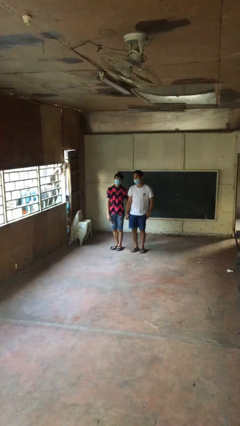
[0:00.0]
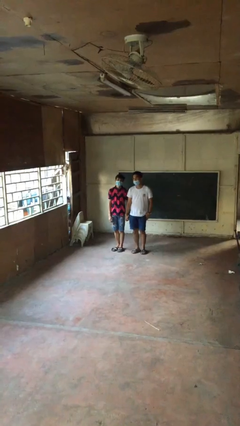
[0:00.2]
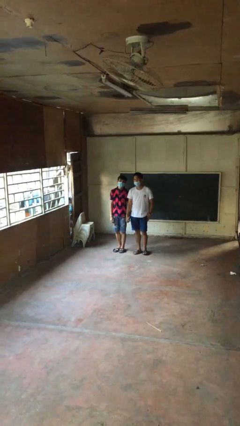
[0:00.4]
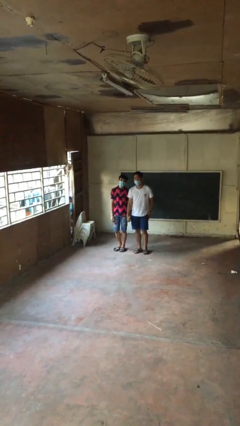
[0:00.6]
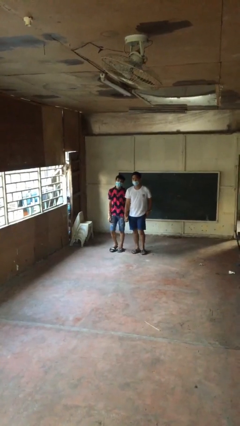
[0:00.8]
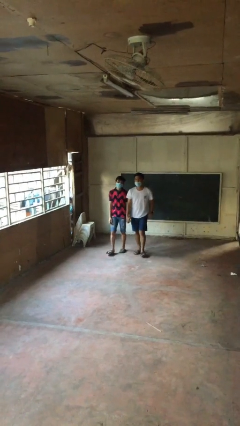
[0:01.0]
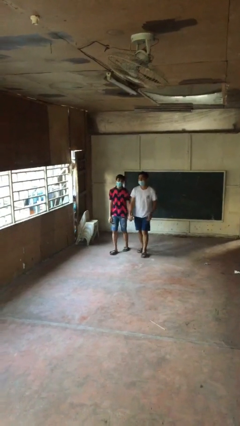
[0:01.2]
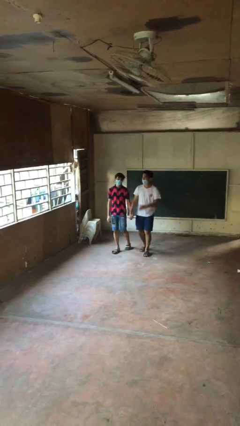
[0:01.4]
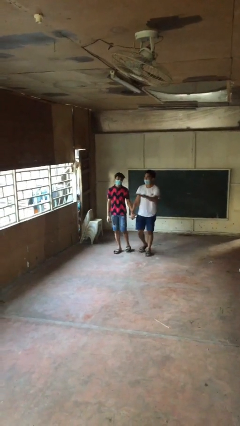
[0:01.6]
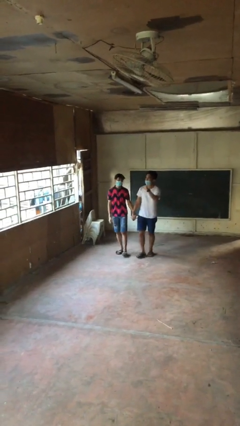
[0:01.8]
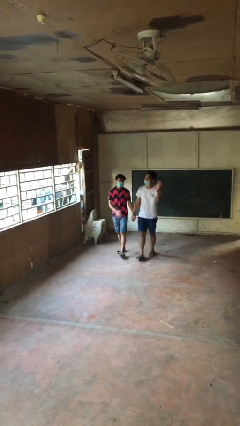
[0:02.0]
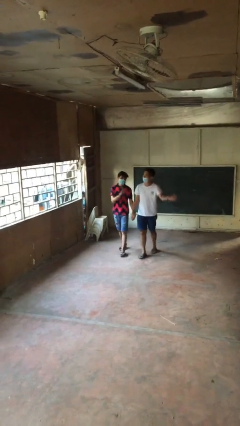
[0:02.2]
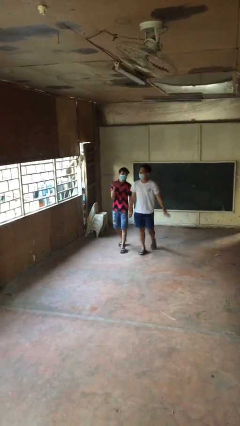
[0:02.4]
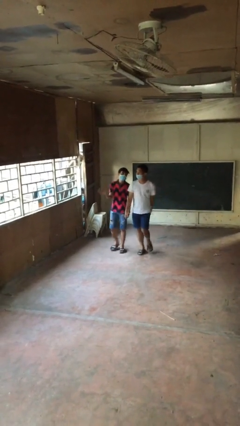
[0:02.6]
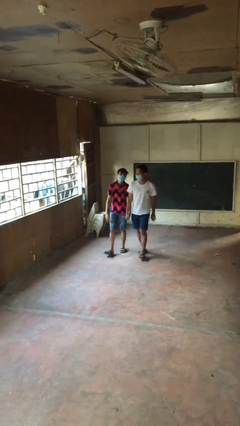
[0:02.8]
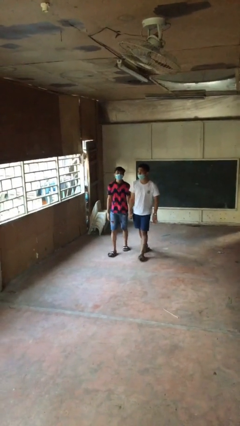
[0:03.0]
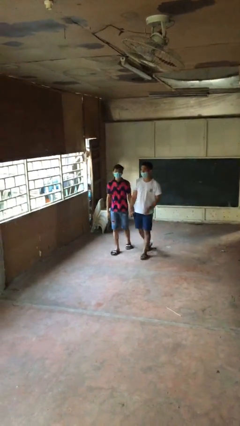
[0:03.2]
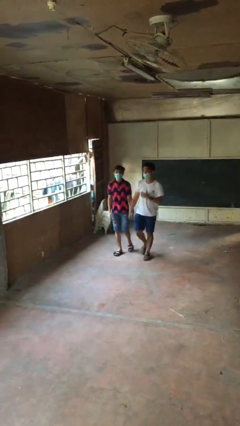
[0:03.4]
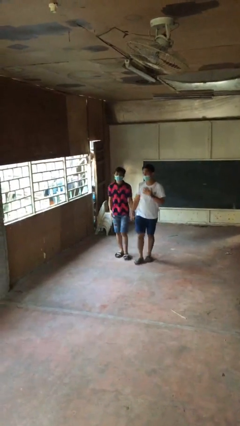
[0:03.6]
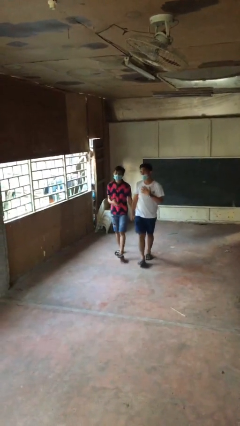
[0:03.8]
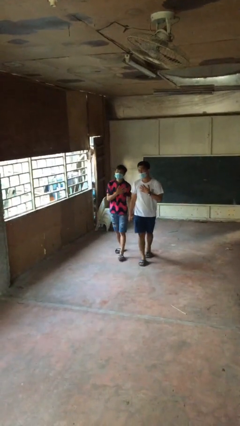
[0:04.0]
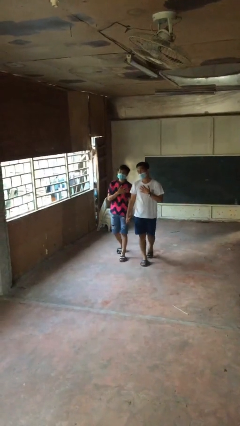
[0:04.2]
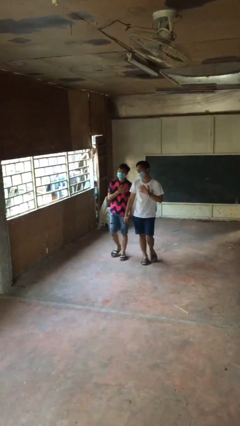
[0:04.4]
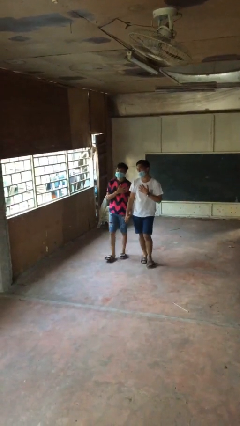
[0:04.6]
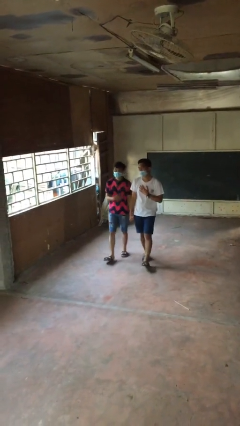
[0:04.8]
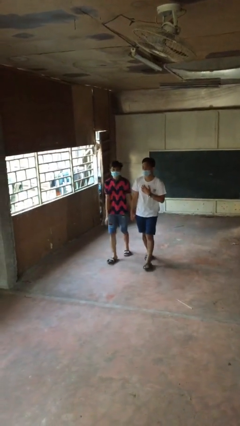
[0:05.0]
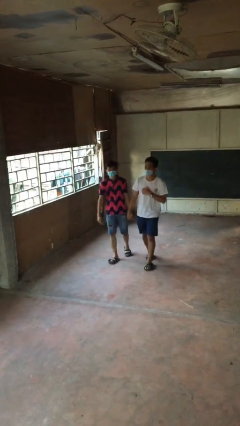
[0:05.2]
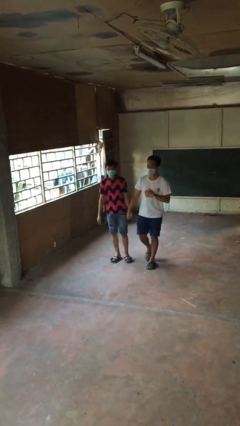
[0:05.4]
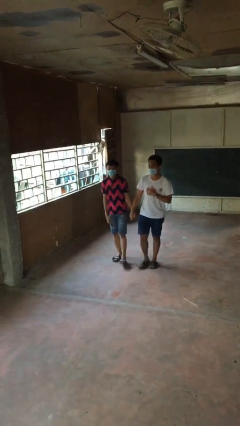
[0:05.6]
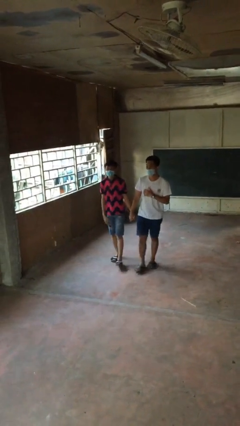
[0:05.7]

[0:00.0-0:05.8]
person holds hand

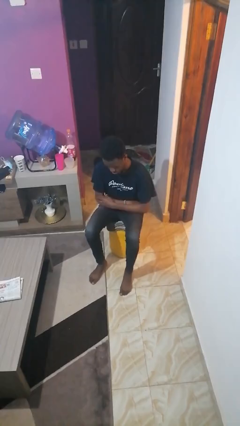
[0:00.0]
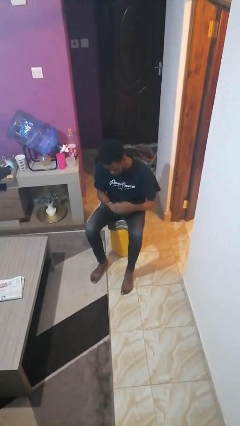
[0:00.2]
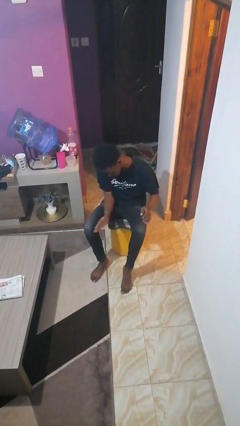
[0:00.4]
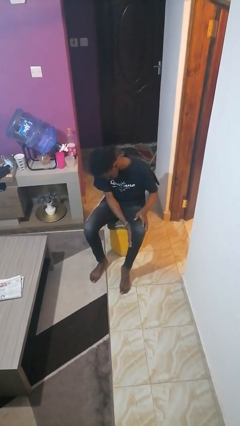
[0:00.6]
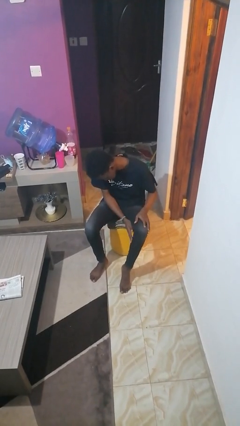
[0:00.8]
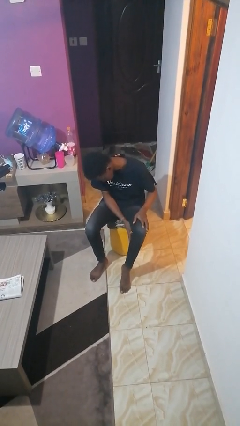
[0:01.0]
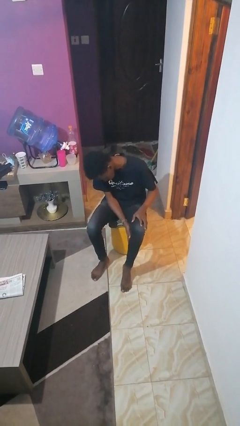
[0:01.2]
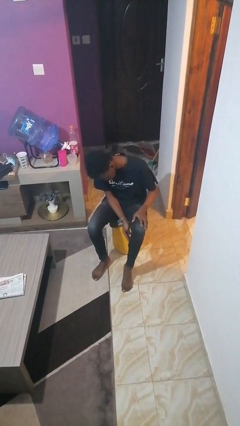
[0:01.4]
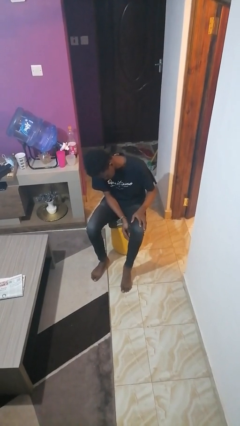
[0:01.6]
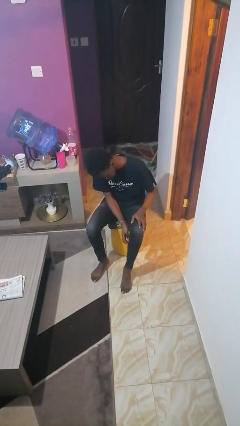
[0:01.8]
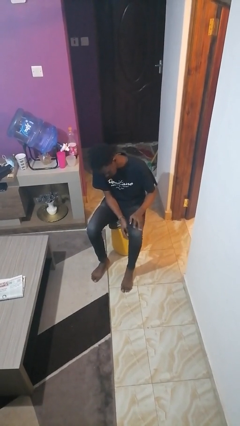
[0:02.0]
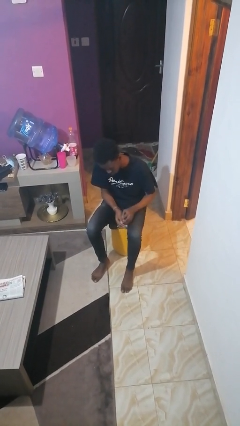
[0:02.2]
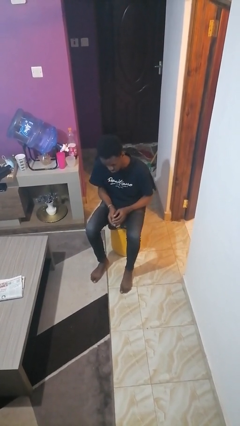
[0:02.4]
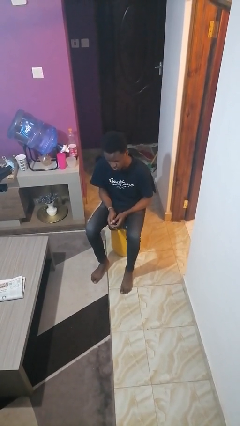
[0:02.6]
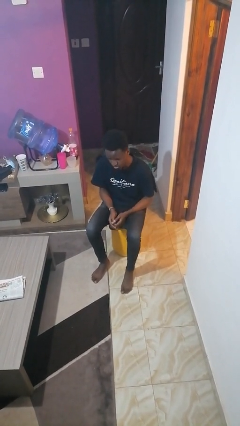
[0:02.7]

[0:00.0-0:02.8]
person swats bug

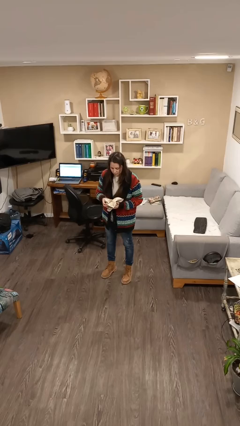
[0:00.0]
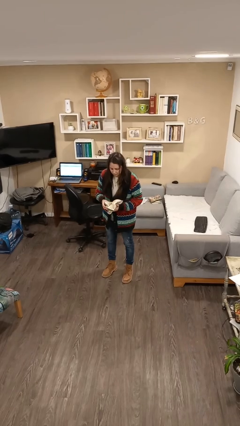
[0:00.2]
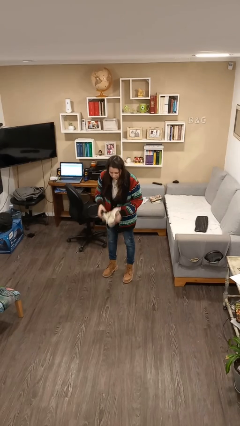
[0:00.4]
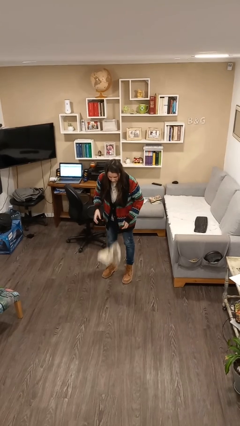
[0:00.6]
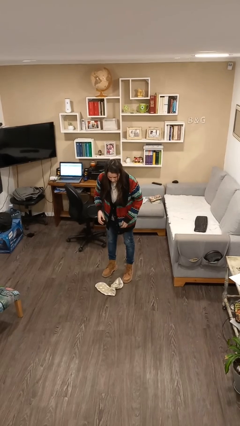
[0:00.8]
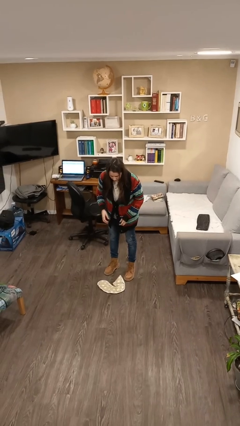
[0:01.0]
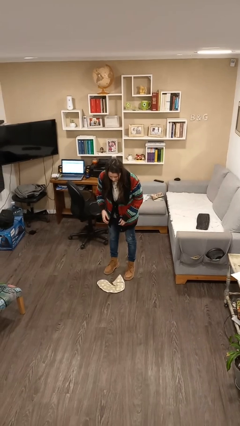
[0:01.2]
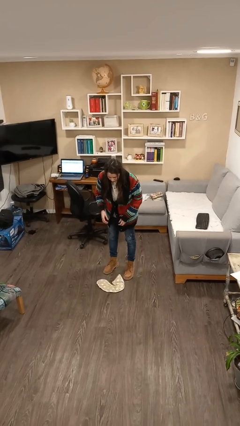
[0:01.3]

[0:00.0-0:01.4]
person drops object

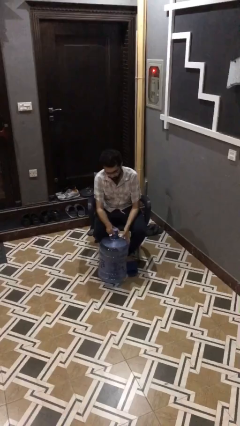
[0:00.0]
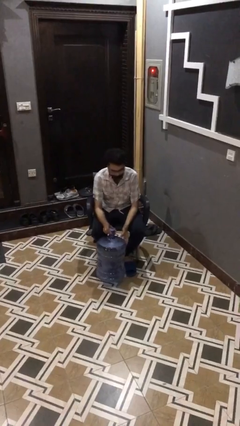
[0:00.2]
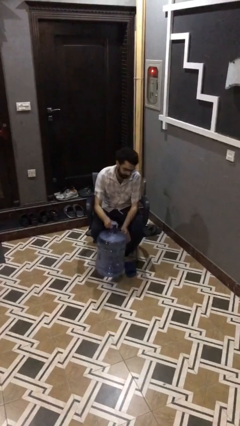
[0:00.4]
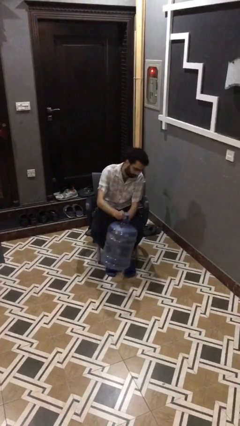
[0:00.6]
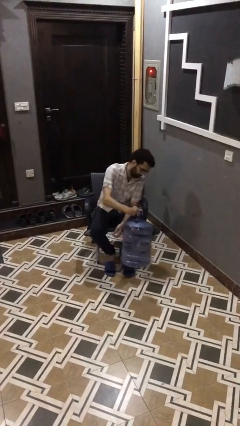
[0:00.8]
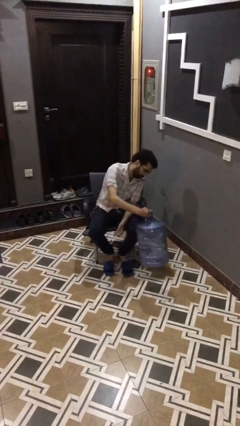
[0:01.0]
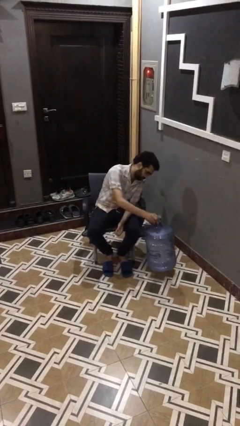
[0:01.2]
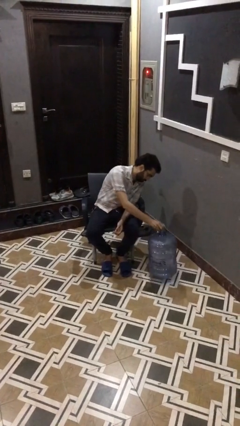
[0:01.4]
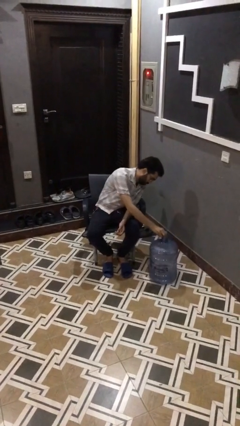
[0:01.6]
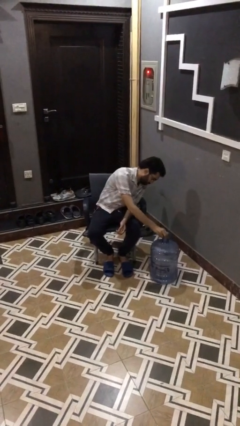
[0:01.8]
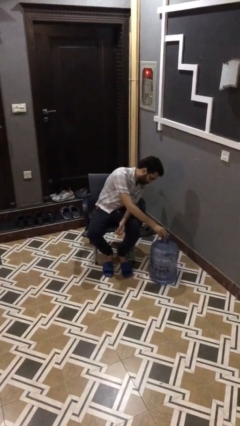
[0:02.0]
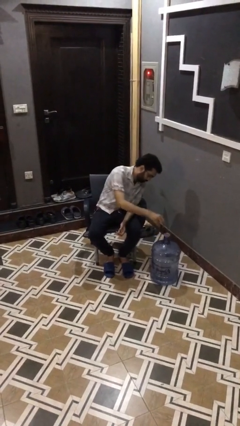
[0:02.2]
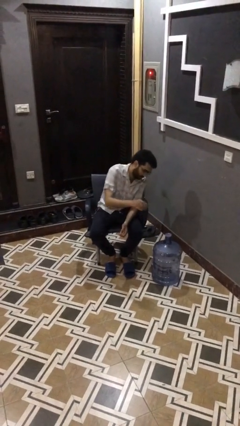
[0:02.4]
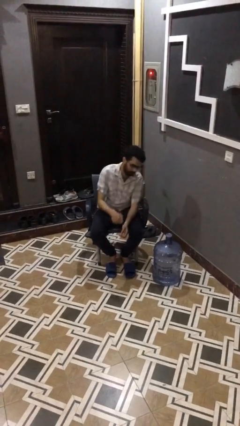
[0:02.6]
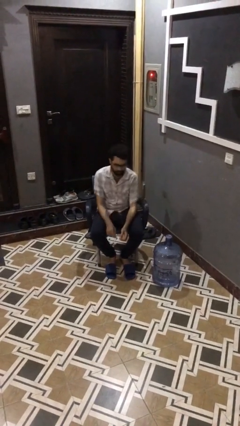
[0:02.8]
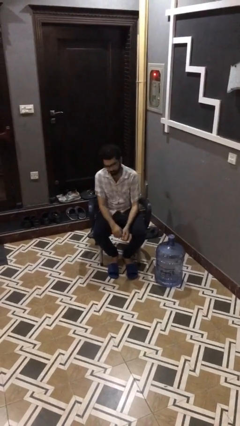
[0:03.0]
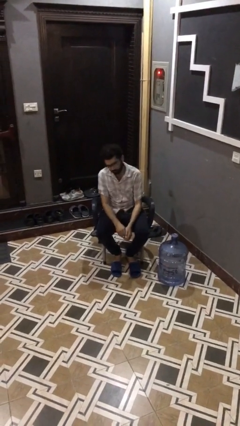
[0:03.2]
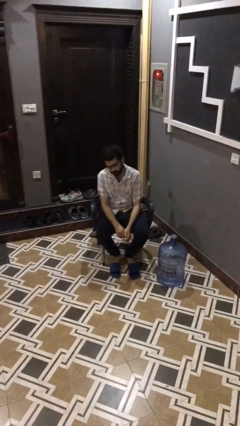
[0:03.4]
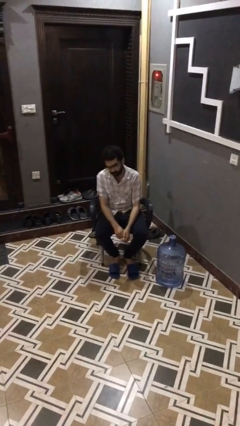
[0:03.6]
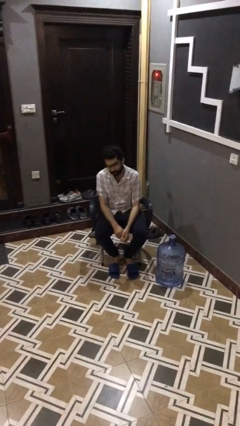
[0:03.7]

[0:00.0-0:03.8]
person puts down object on floor

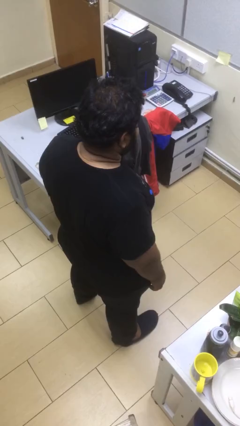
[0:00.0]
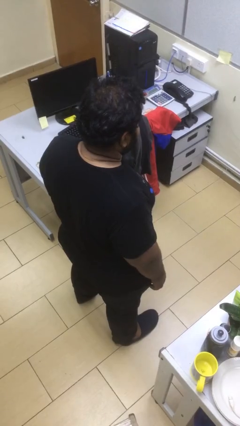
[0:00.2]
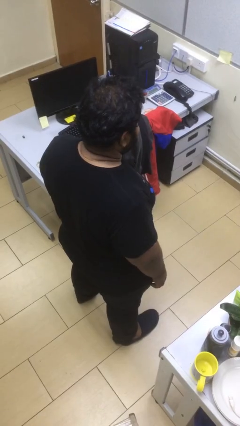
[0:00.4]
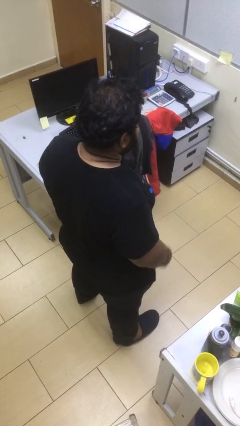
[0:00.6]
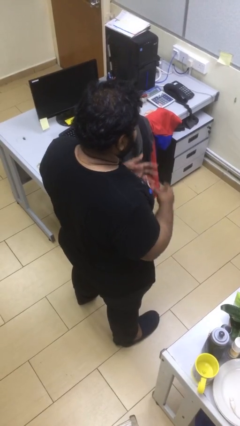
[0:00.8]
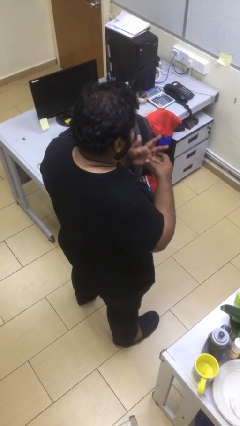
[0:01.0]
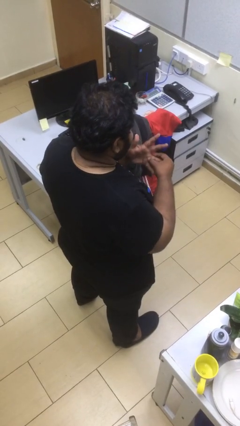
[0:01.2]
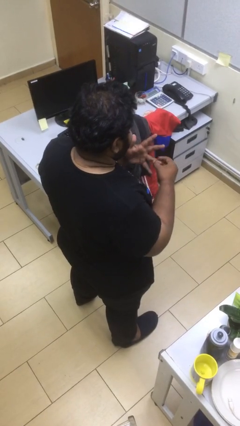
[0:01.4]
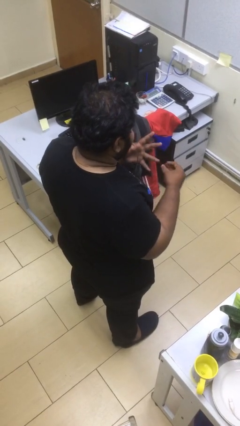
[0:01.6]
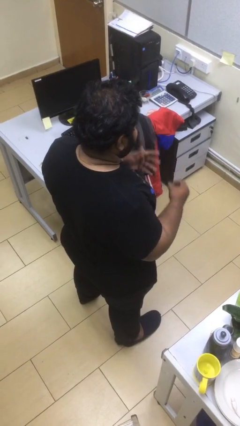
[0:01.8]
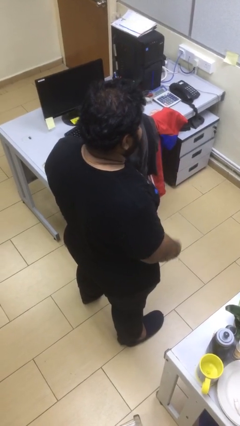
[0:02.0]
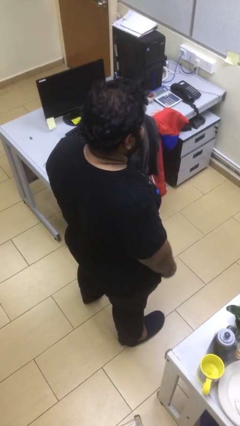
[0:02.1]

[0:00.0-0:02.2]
person takes off ring

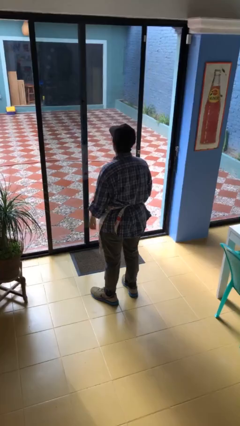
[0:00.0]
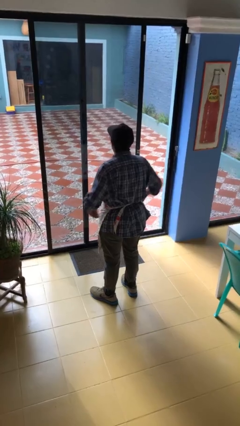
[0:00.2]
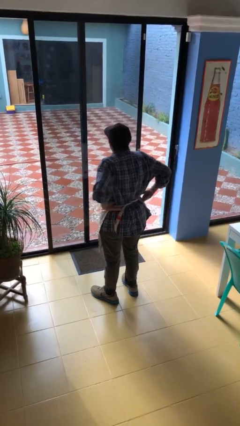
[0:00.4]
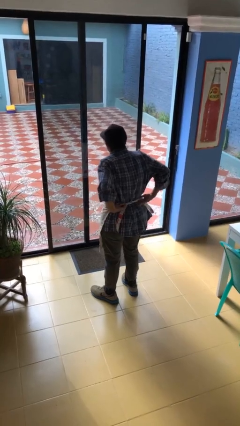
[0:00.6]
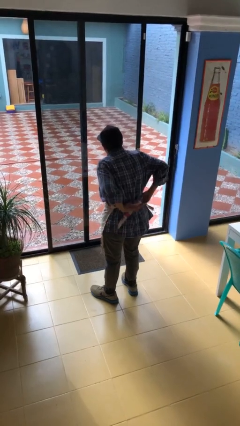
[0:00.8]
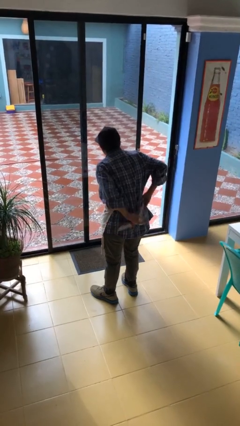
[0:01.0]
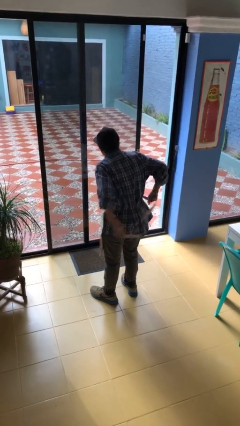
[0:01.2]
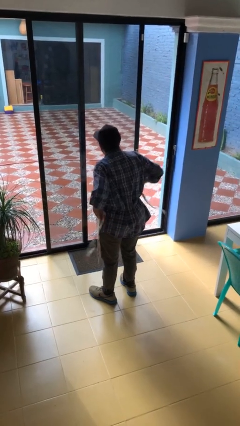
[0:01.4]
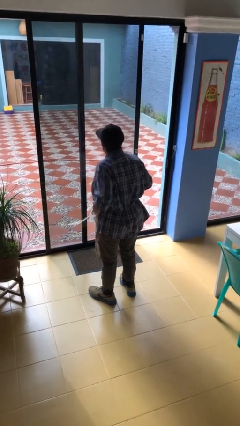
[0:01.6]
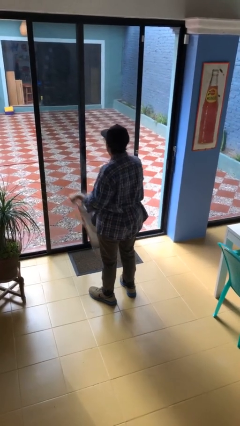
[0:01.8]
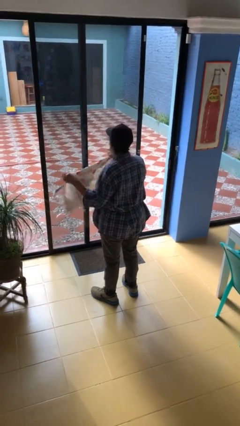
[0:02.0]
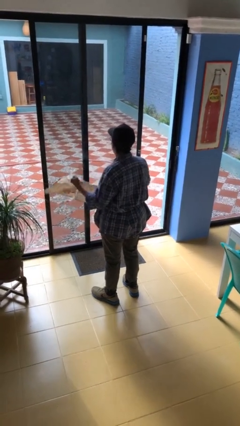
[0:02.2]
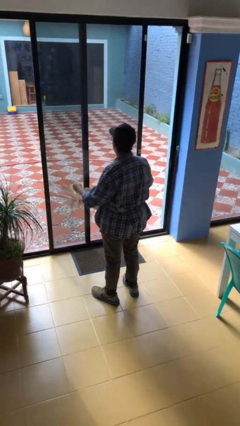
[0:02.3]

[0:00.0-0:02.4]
person takes off apron
